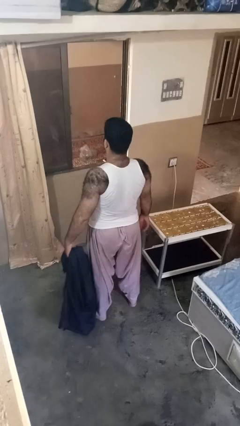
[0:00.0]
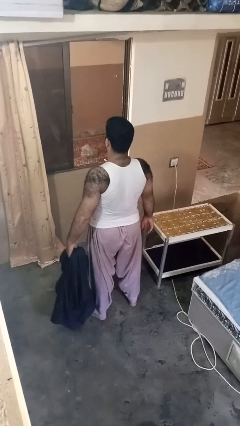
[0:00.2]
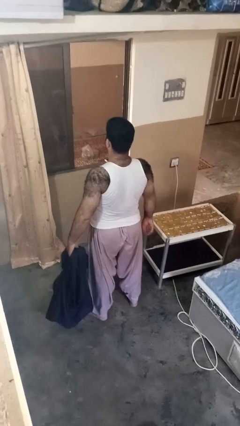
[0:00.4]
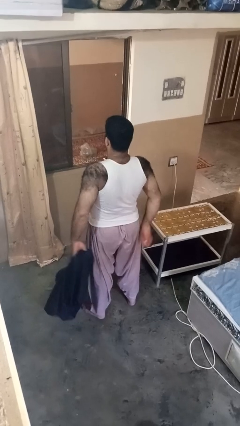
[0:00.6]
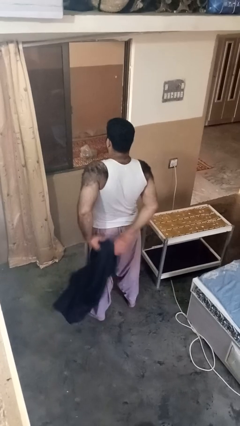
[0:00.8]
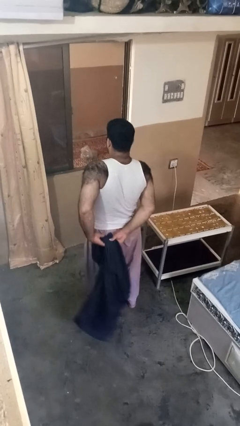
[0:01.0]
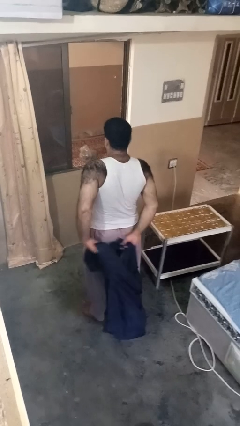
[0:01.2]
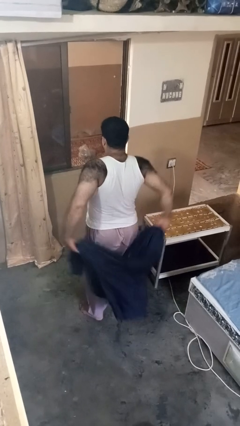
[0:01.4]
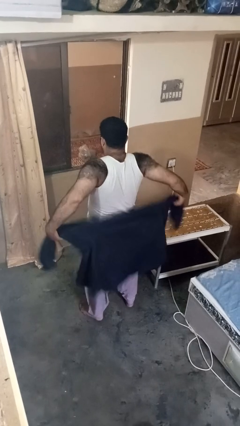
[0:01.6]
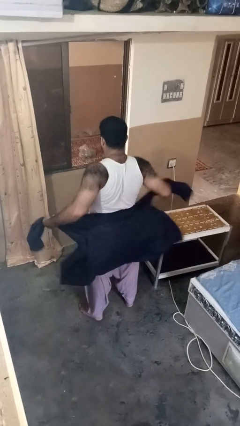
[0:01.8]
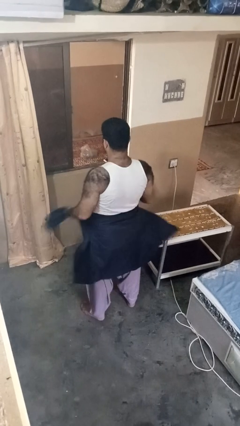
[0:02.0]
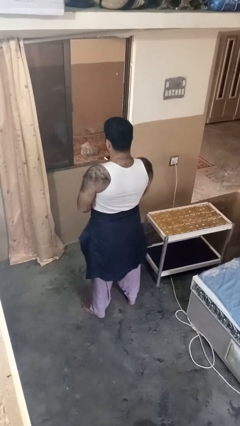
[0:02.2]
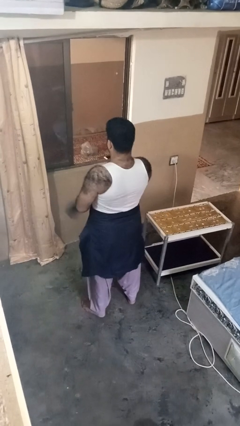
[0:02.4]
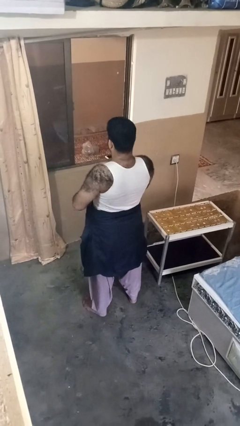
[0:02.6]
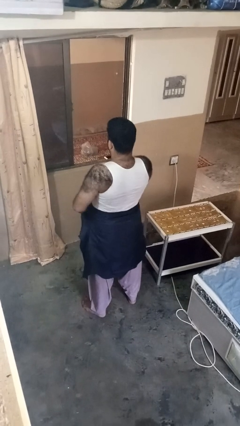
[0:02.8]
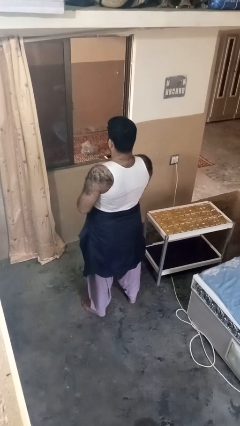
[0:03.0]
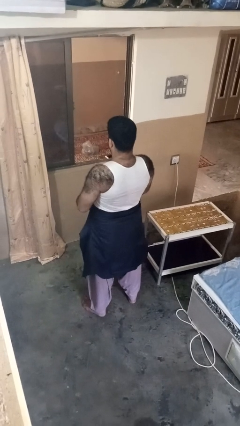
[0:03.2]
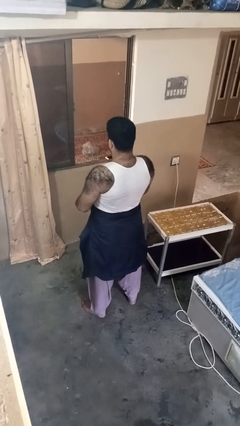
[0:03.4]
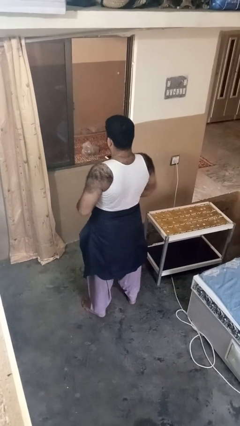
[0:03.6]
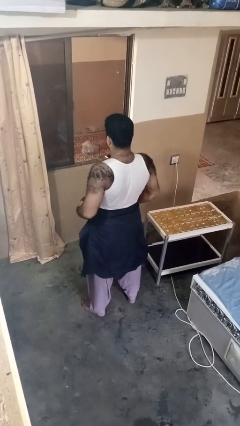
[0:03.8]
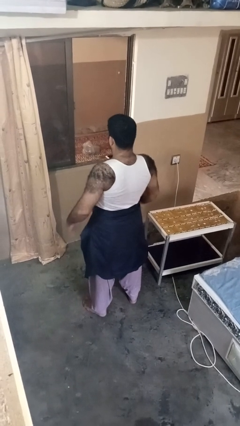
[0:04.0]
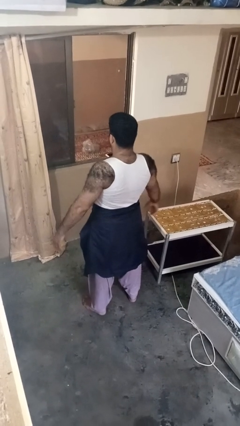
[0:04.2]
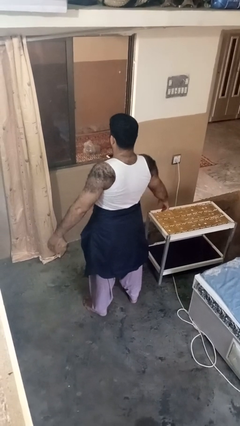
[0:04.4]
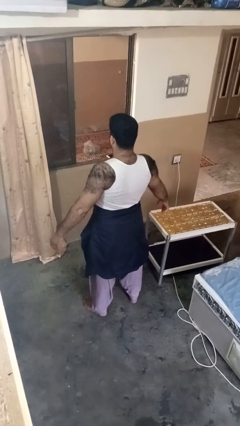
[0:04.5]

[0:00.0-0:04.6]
person ties jacket around waist

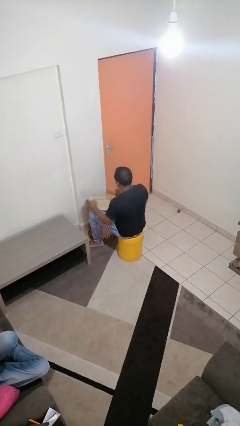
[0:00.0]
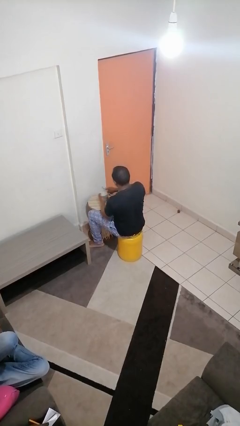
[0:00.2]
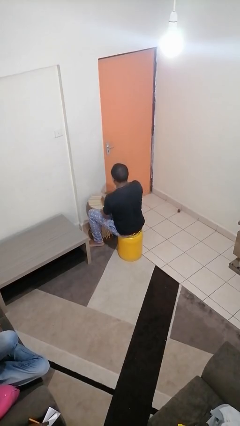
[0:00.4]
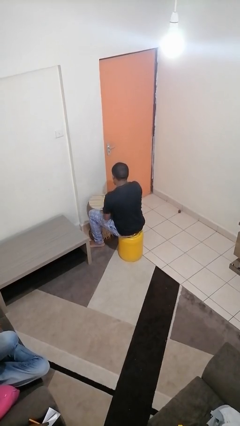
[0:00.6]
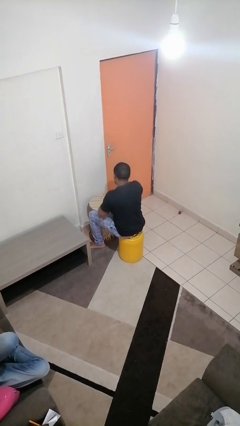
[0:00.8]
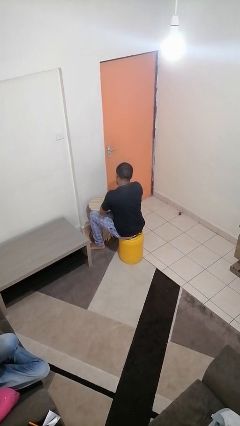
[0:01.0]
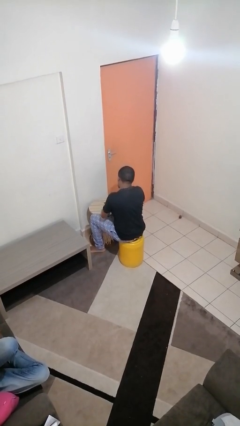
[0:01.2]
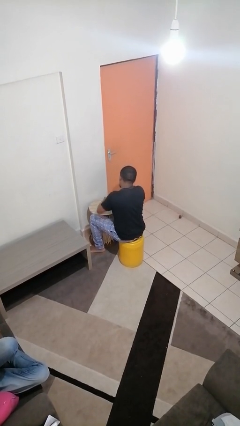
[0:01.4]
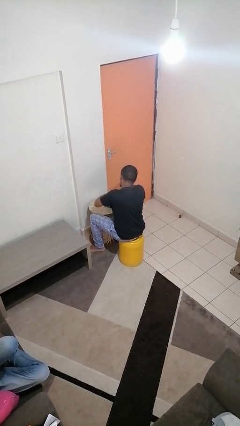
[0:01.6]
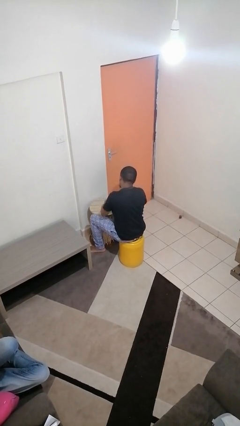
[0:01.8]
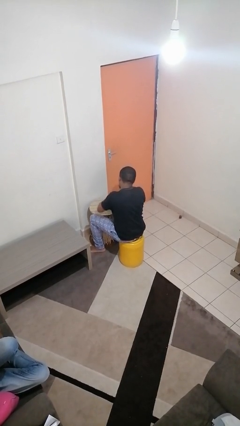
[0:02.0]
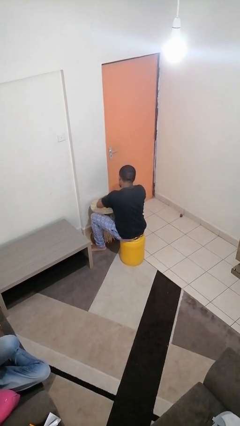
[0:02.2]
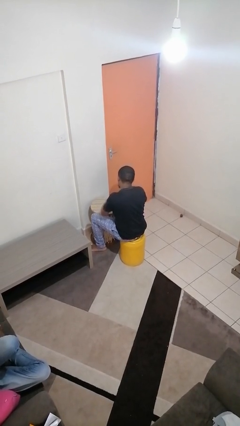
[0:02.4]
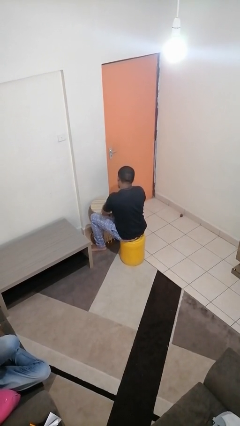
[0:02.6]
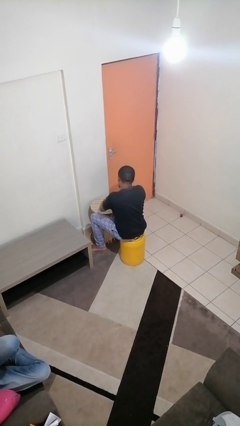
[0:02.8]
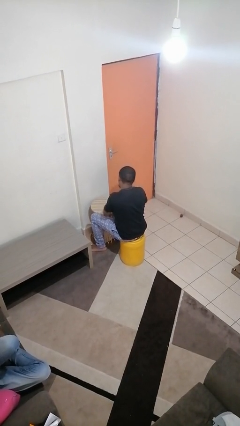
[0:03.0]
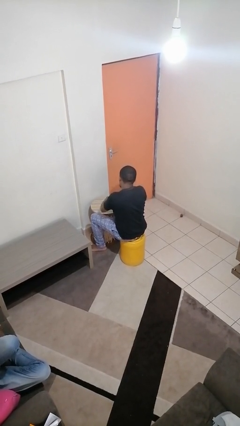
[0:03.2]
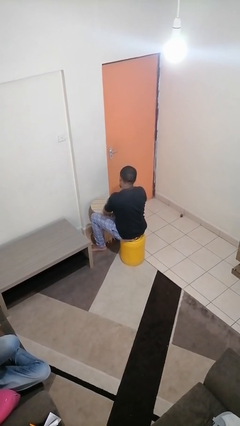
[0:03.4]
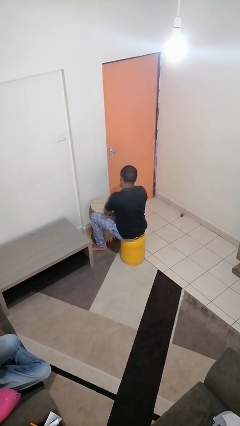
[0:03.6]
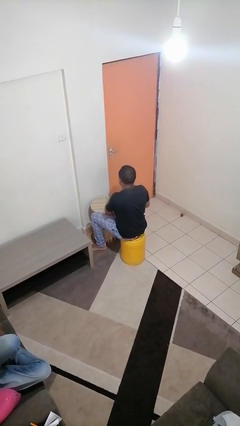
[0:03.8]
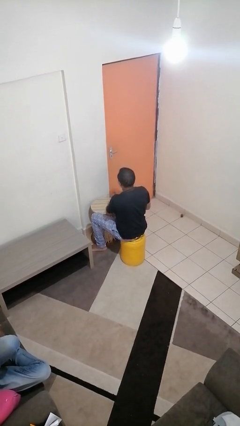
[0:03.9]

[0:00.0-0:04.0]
person opens can with can opener

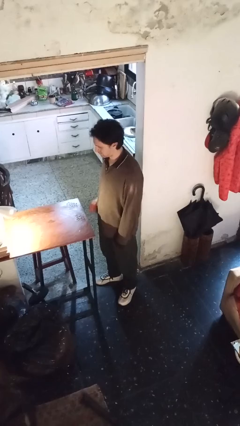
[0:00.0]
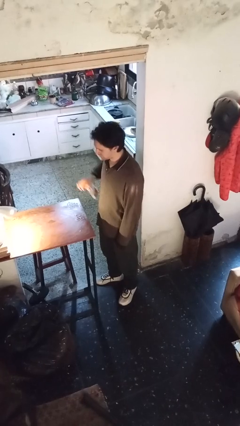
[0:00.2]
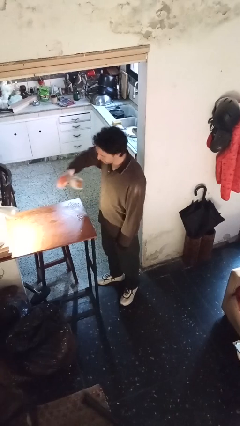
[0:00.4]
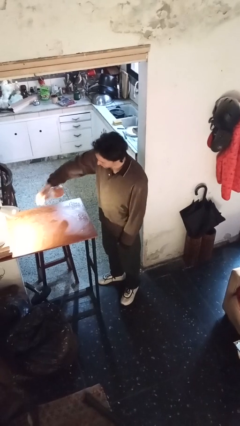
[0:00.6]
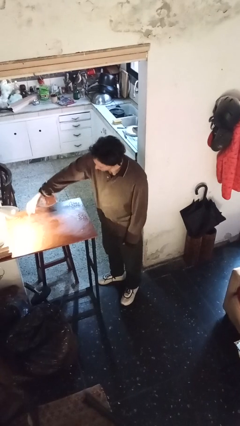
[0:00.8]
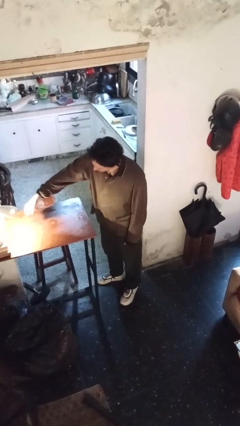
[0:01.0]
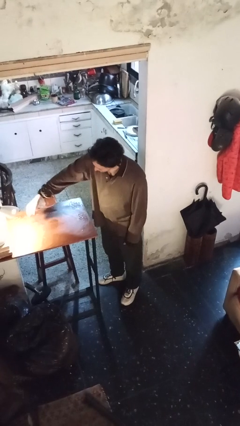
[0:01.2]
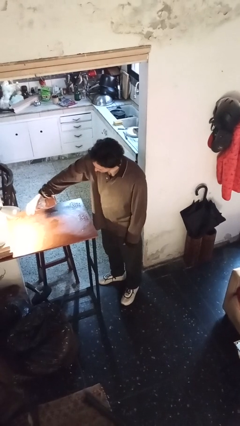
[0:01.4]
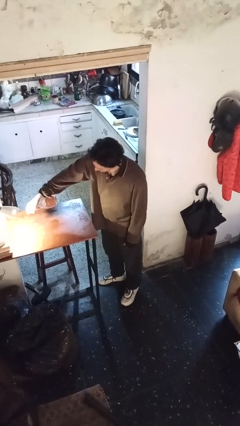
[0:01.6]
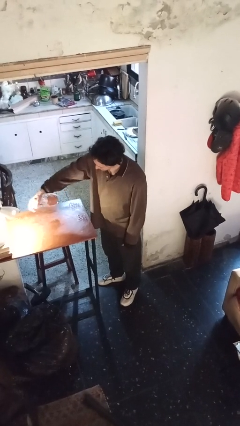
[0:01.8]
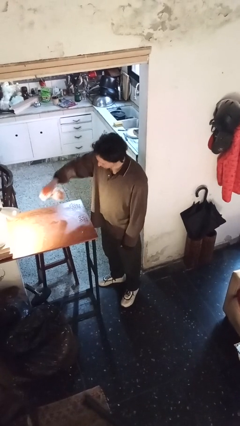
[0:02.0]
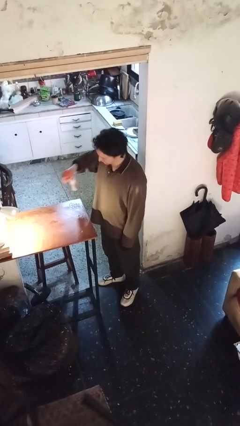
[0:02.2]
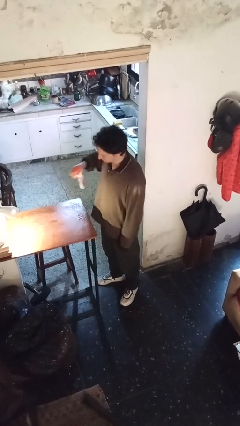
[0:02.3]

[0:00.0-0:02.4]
person sprays from bottle

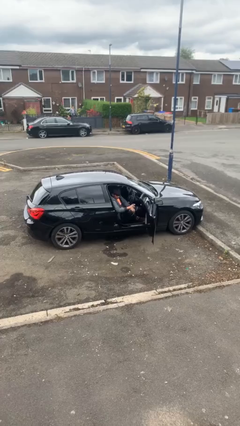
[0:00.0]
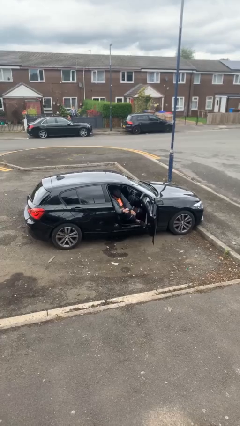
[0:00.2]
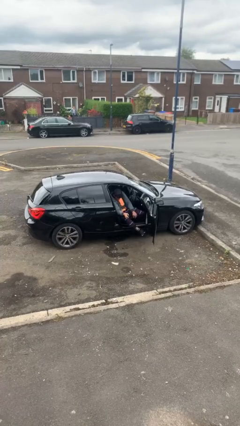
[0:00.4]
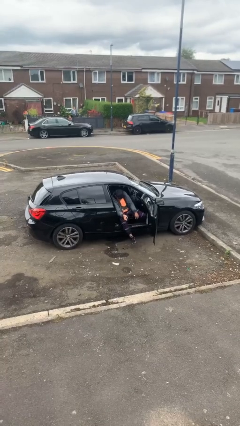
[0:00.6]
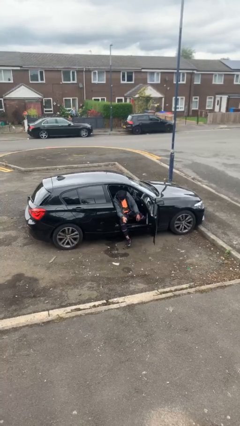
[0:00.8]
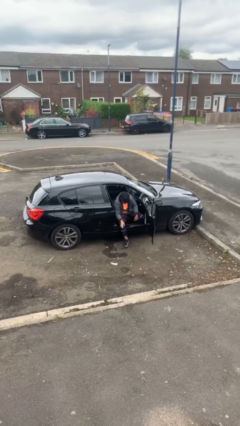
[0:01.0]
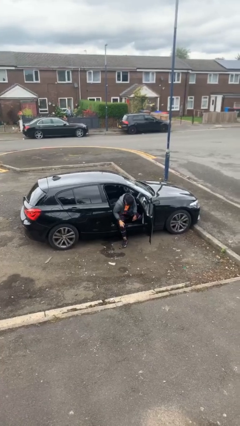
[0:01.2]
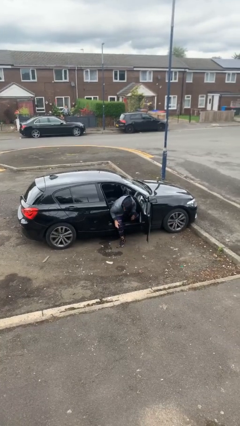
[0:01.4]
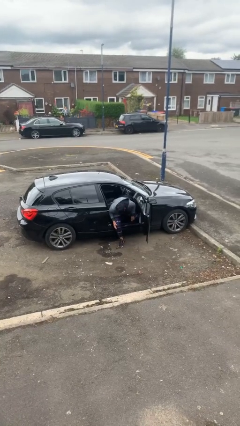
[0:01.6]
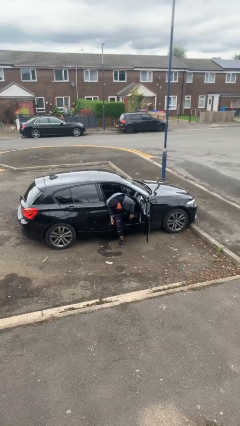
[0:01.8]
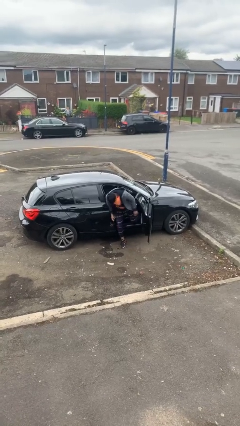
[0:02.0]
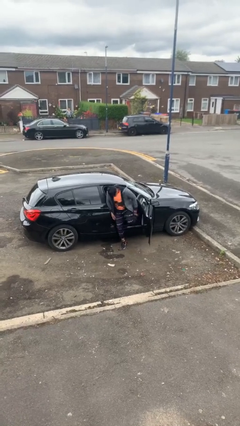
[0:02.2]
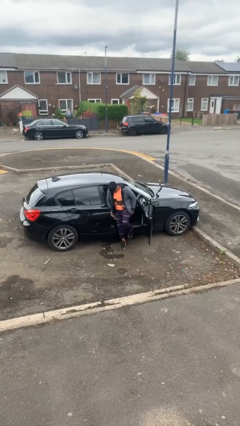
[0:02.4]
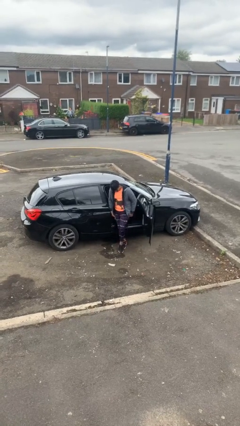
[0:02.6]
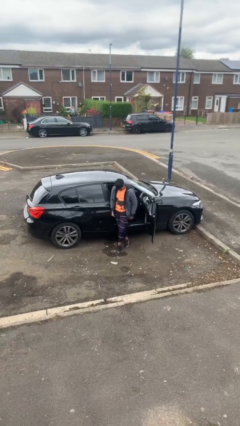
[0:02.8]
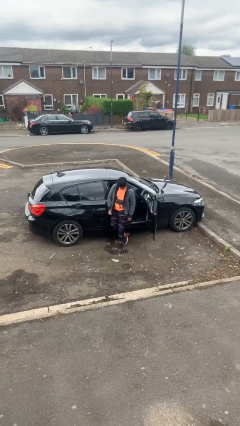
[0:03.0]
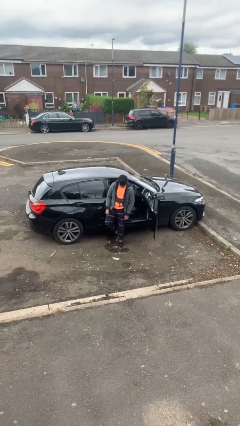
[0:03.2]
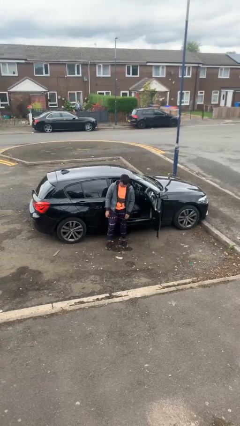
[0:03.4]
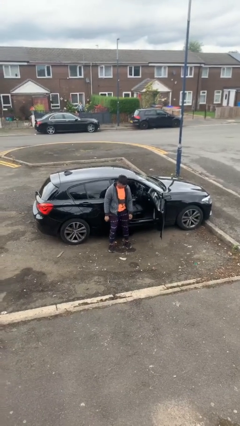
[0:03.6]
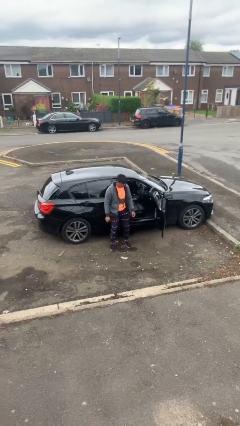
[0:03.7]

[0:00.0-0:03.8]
person exits car

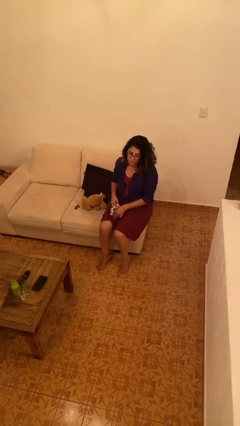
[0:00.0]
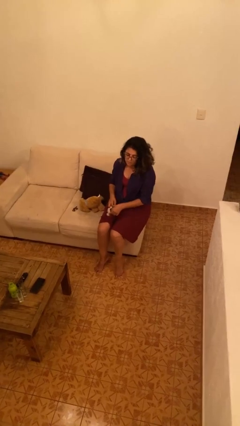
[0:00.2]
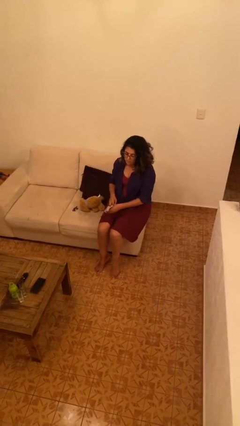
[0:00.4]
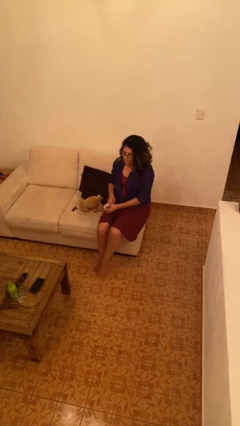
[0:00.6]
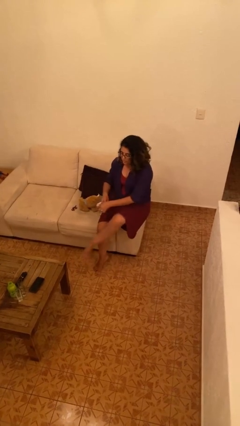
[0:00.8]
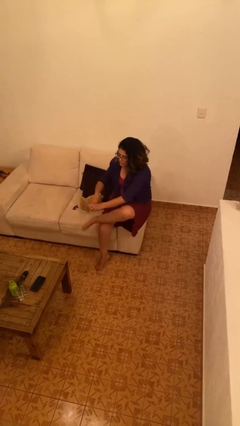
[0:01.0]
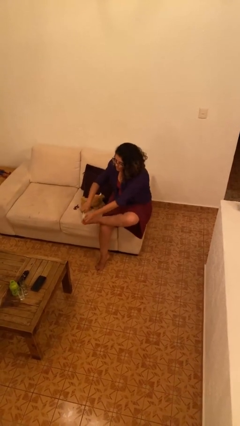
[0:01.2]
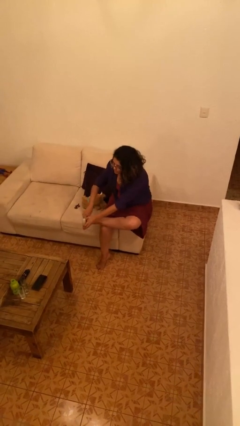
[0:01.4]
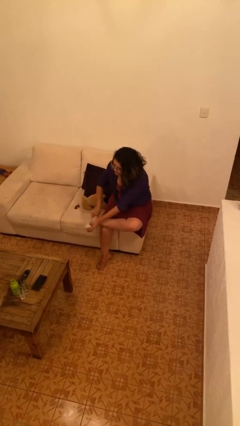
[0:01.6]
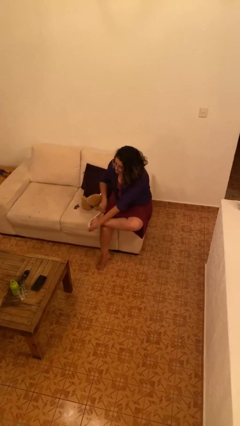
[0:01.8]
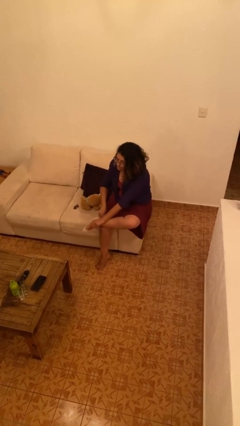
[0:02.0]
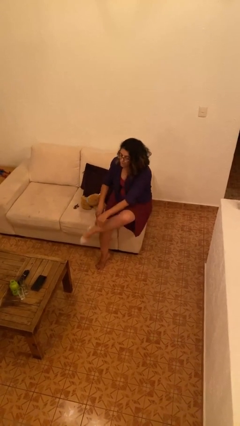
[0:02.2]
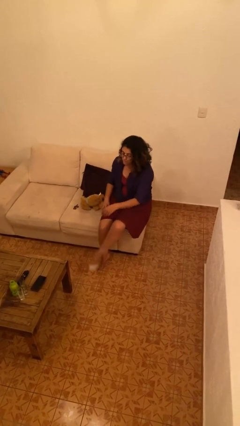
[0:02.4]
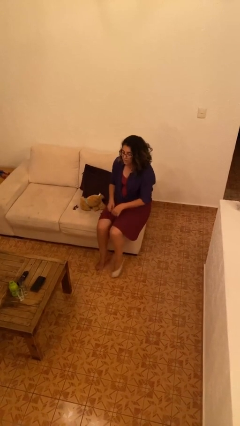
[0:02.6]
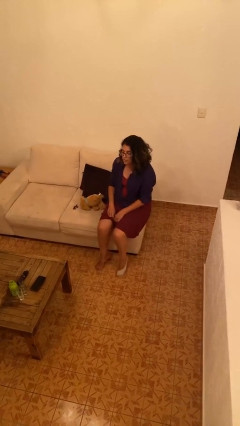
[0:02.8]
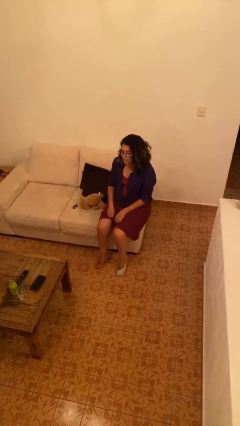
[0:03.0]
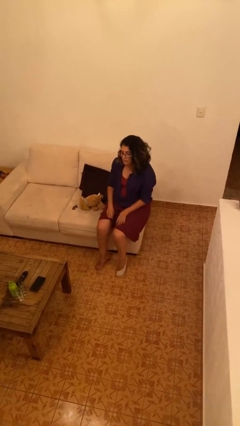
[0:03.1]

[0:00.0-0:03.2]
person puts on socks
